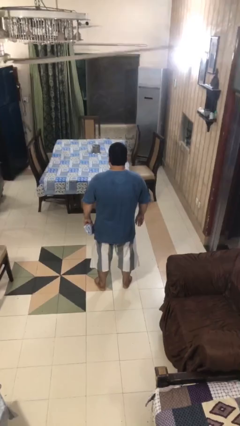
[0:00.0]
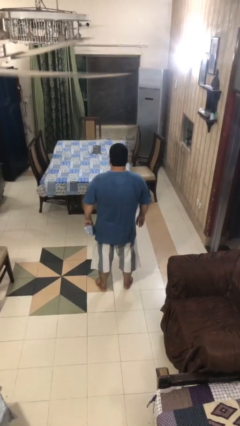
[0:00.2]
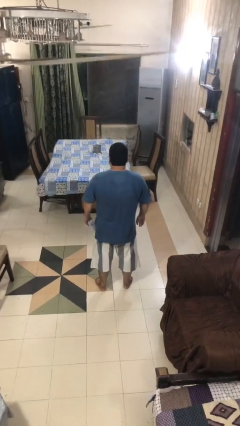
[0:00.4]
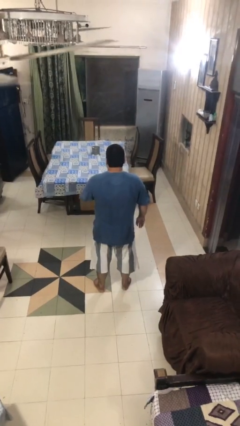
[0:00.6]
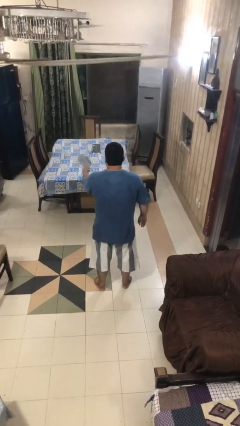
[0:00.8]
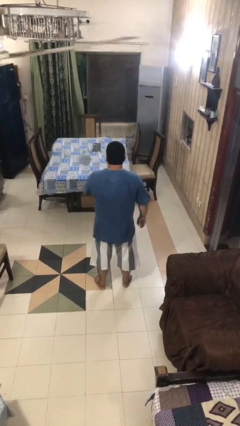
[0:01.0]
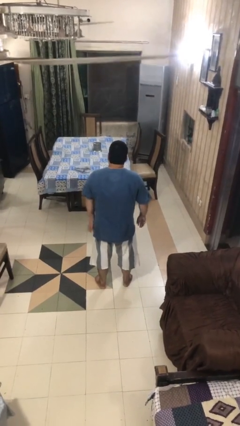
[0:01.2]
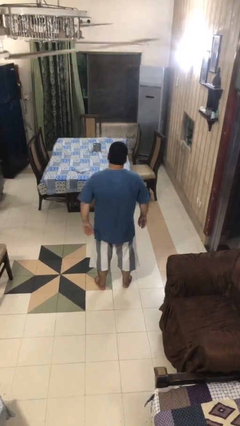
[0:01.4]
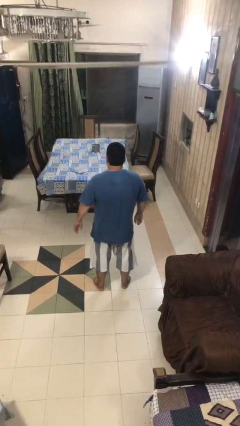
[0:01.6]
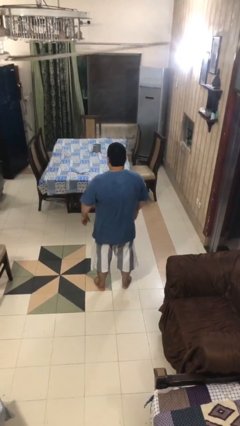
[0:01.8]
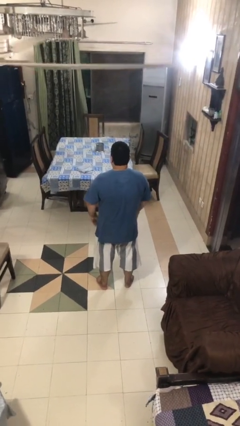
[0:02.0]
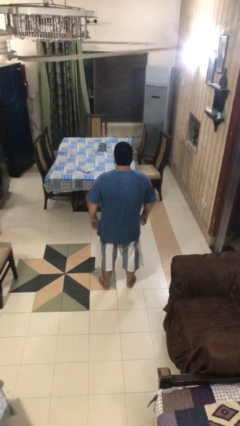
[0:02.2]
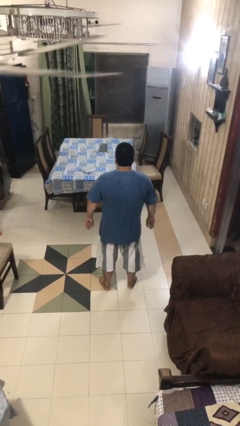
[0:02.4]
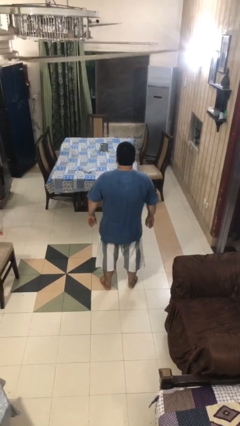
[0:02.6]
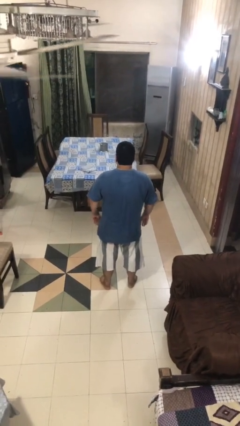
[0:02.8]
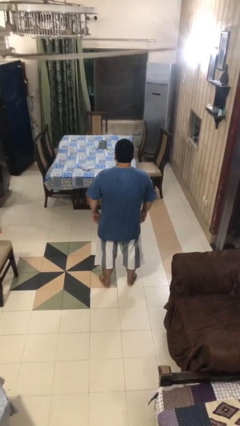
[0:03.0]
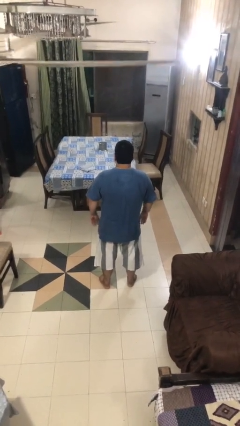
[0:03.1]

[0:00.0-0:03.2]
person throws object on table

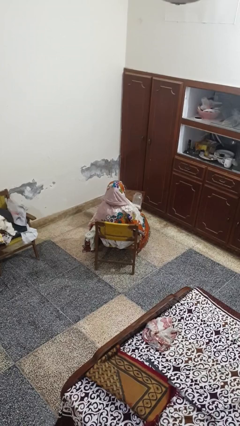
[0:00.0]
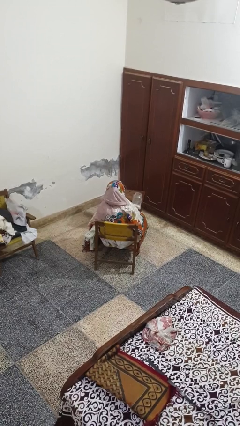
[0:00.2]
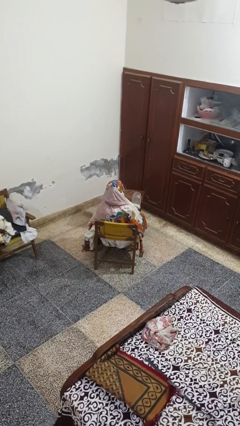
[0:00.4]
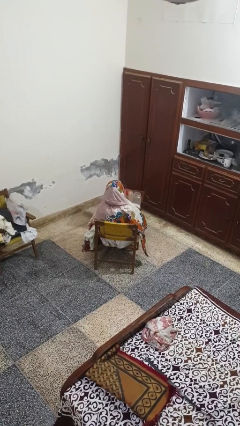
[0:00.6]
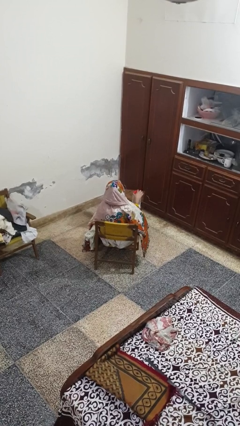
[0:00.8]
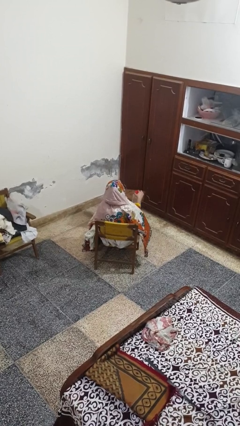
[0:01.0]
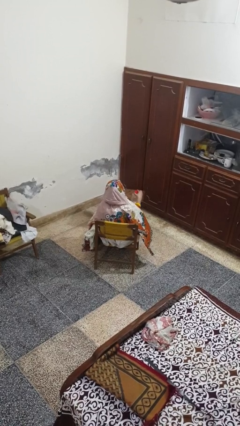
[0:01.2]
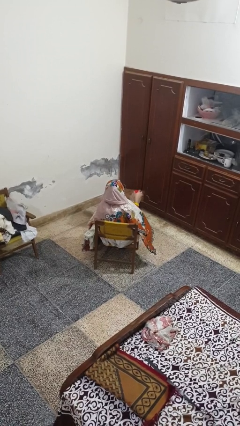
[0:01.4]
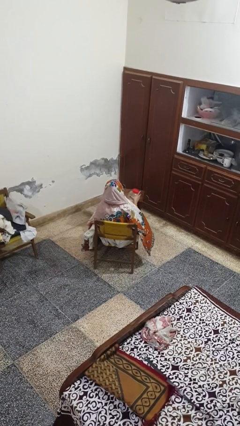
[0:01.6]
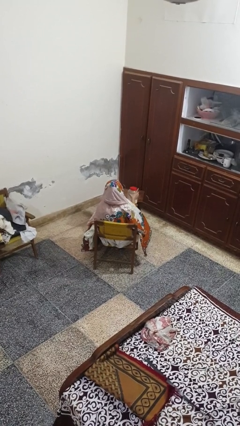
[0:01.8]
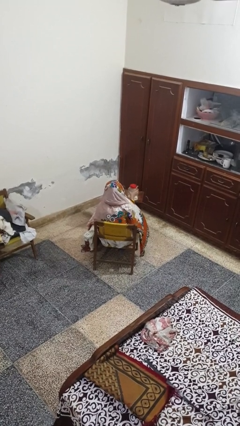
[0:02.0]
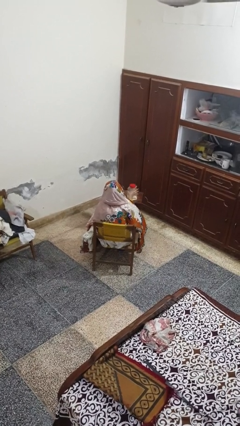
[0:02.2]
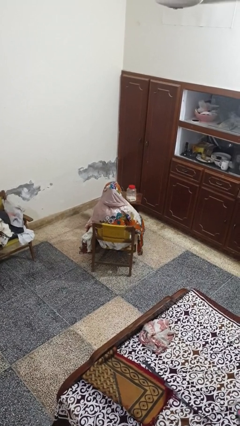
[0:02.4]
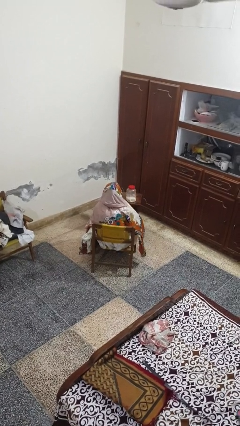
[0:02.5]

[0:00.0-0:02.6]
person closes jar

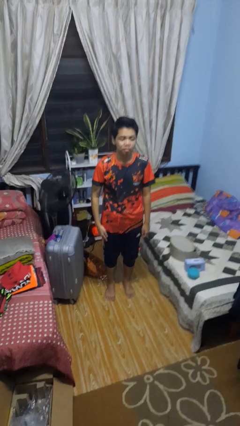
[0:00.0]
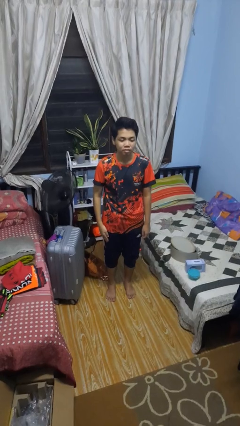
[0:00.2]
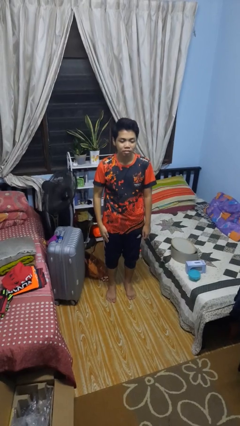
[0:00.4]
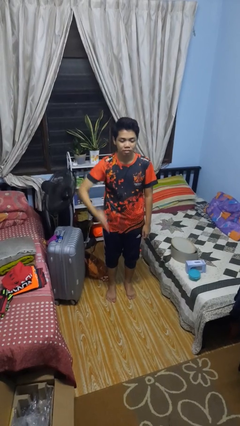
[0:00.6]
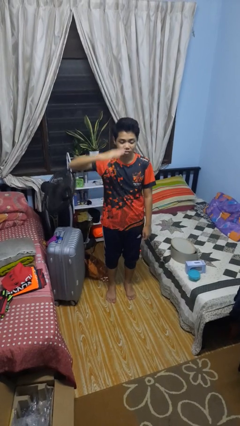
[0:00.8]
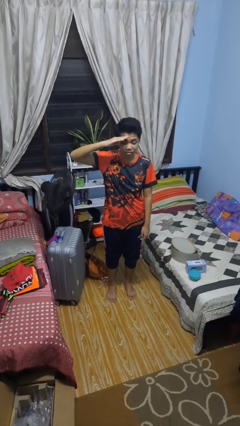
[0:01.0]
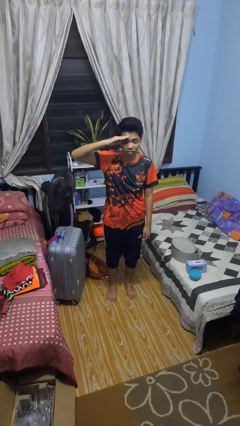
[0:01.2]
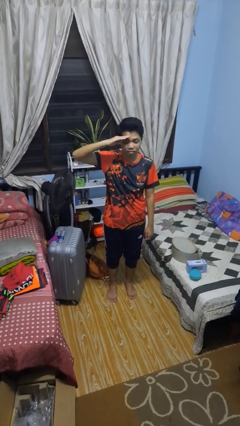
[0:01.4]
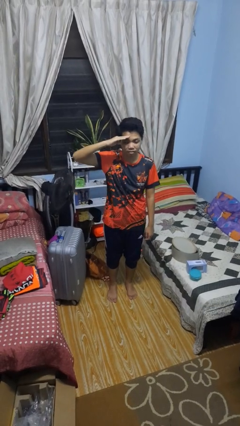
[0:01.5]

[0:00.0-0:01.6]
person salutes

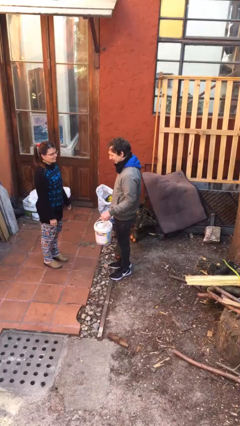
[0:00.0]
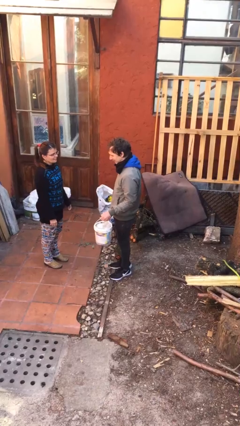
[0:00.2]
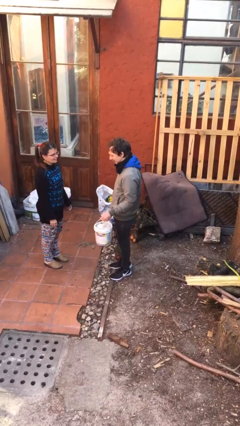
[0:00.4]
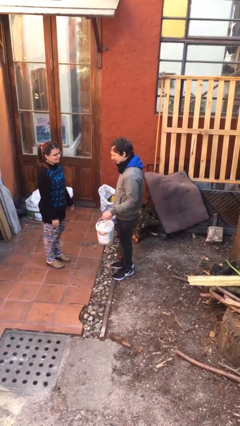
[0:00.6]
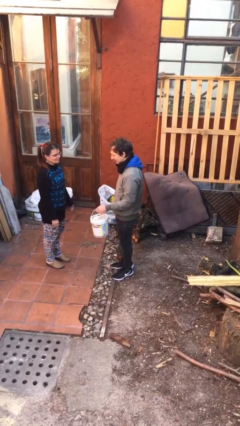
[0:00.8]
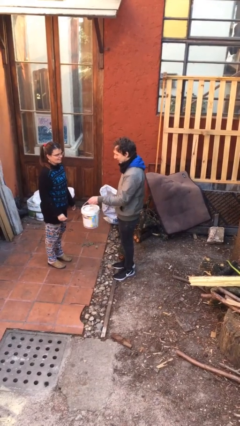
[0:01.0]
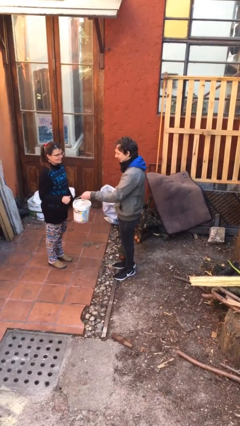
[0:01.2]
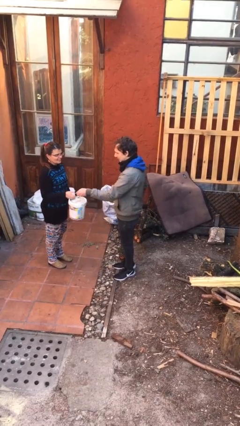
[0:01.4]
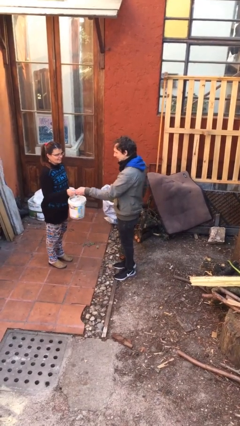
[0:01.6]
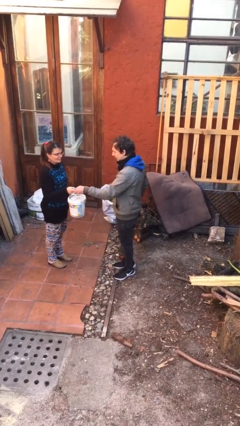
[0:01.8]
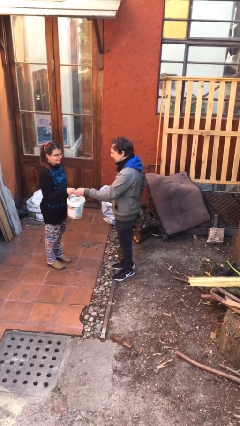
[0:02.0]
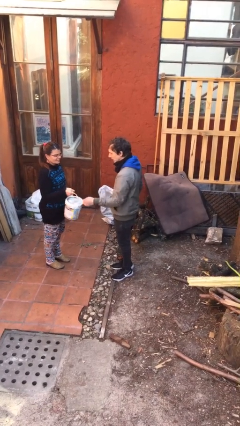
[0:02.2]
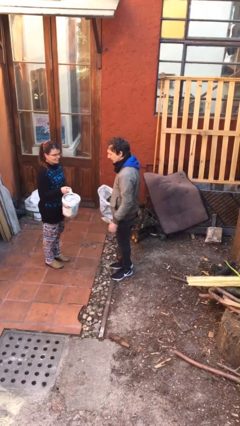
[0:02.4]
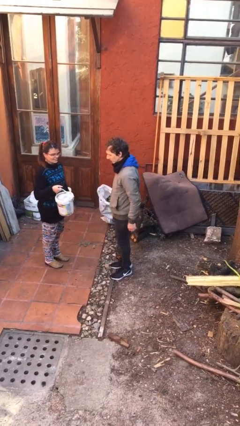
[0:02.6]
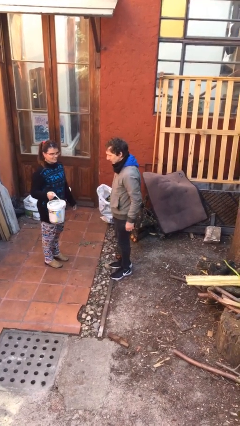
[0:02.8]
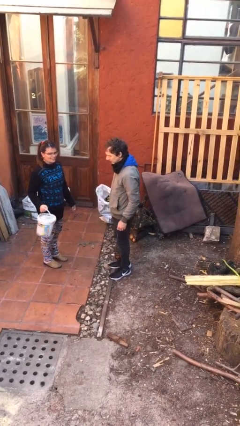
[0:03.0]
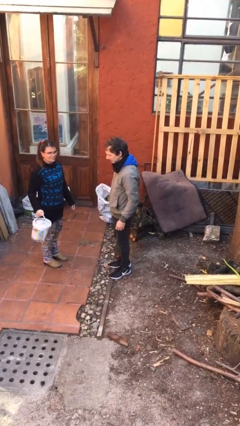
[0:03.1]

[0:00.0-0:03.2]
person transfers object to person

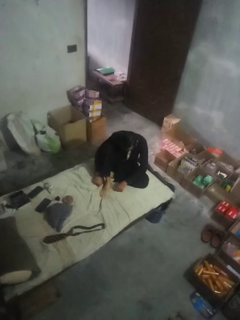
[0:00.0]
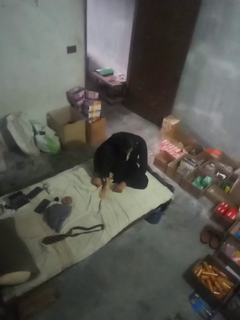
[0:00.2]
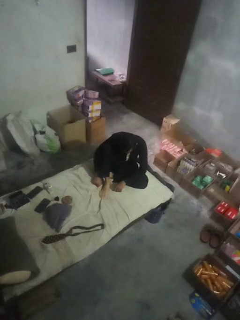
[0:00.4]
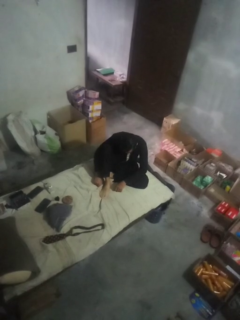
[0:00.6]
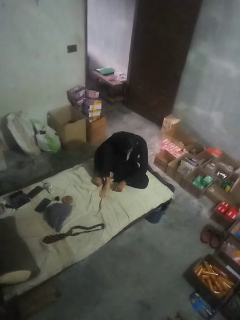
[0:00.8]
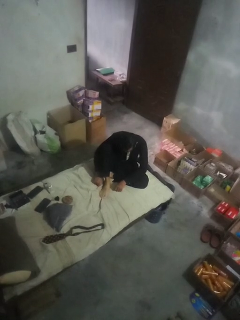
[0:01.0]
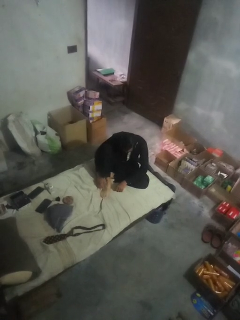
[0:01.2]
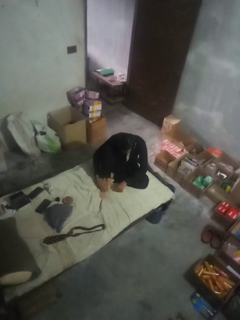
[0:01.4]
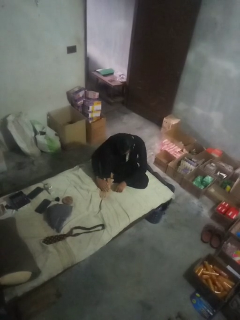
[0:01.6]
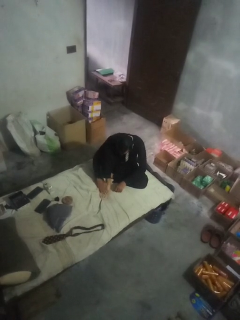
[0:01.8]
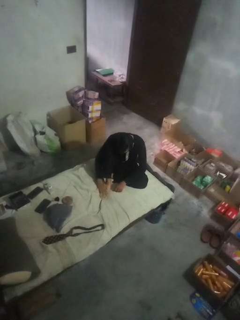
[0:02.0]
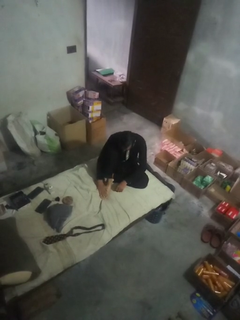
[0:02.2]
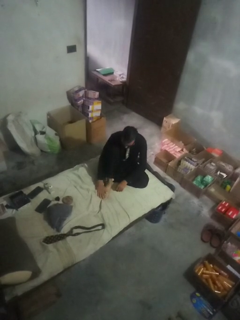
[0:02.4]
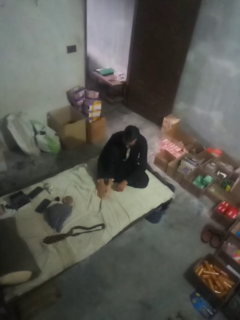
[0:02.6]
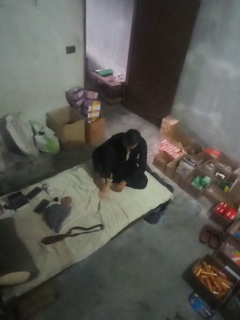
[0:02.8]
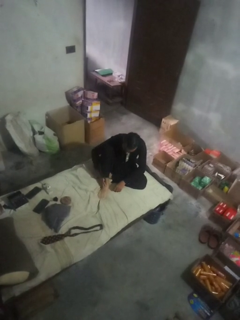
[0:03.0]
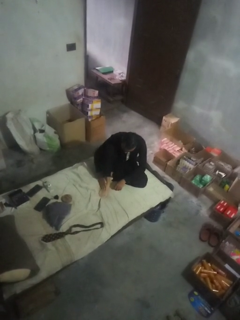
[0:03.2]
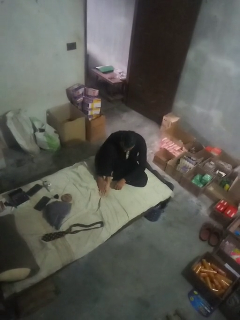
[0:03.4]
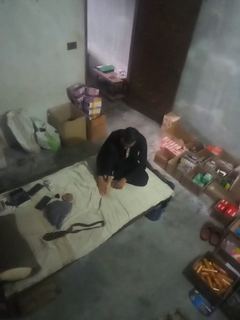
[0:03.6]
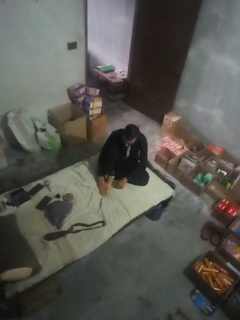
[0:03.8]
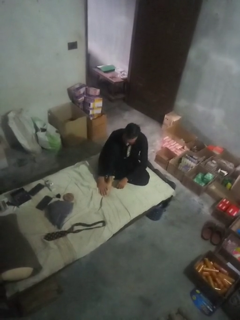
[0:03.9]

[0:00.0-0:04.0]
person rubs foot

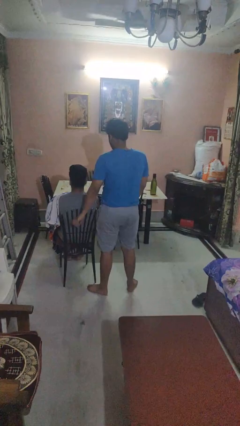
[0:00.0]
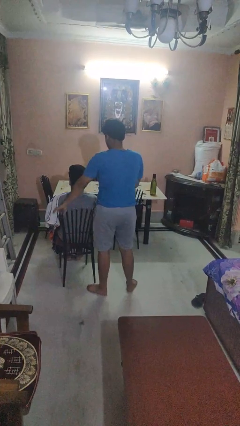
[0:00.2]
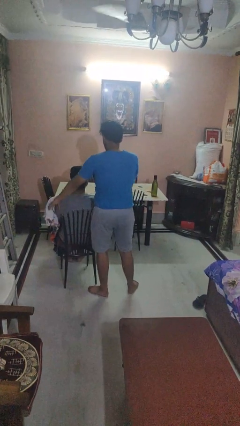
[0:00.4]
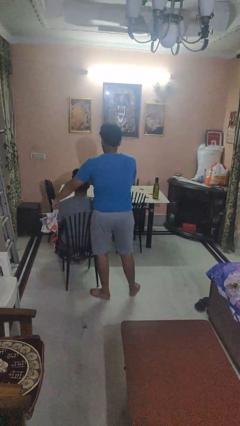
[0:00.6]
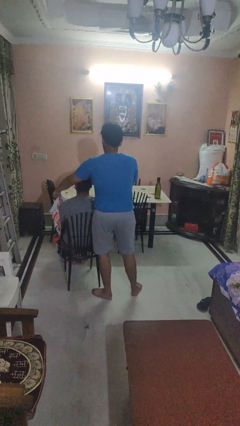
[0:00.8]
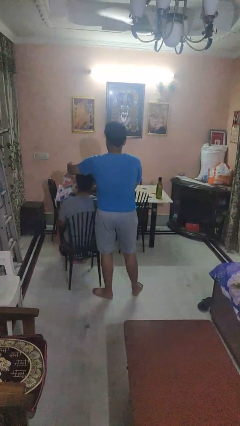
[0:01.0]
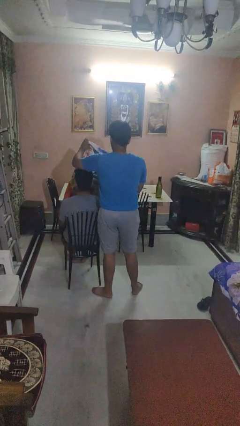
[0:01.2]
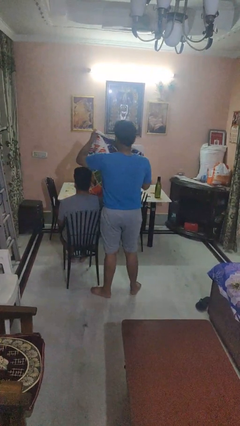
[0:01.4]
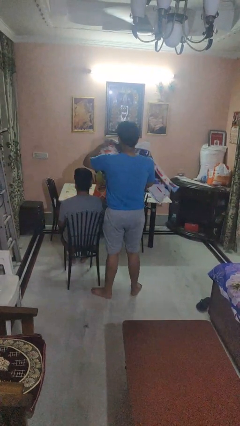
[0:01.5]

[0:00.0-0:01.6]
person uncovers friend with blanket

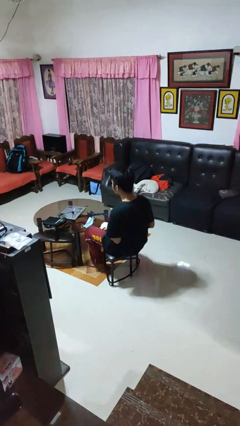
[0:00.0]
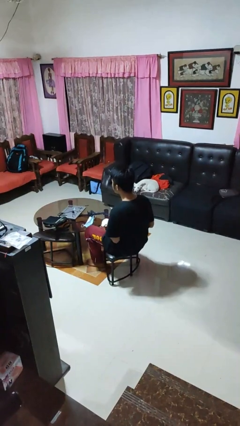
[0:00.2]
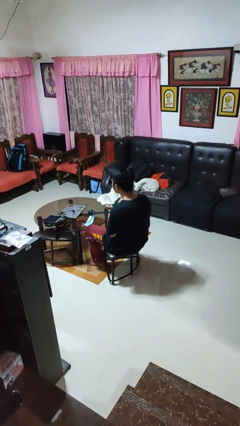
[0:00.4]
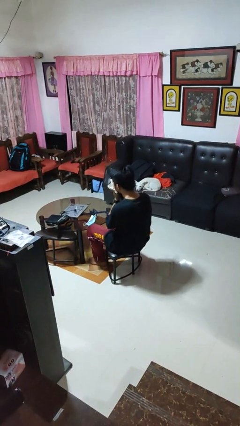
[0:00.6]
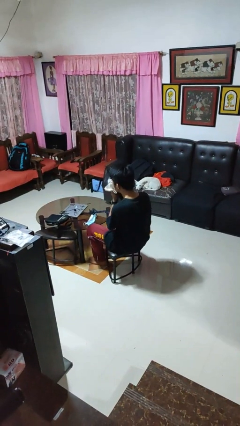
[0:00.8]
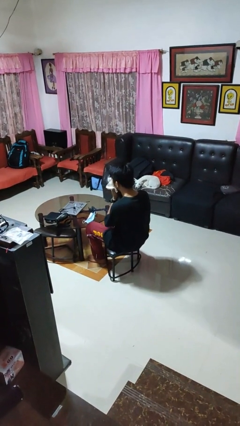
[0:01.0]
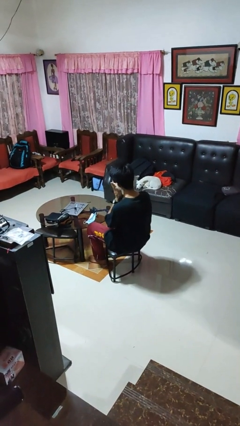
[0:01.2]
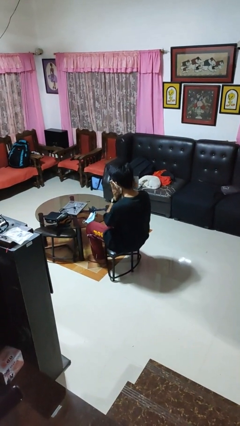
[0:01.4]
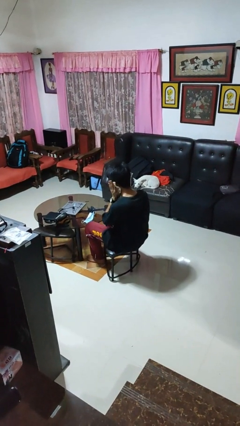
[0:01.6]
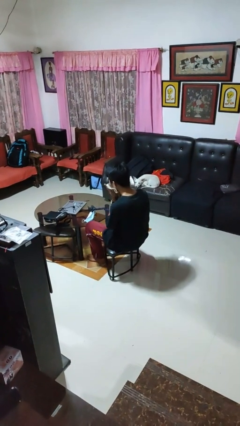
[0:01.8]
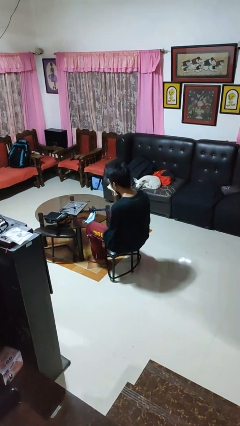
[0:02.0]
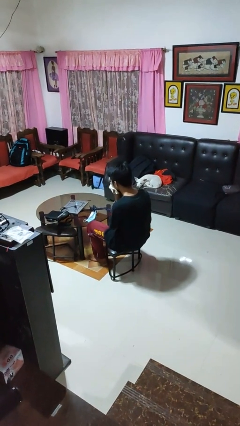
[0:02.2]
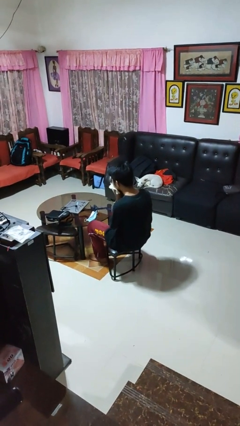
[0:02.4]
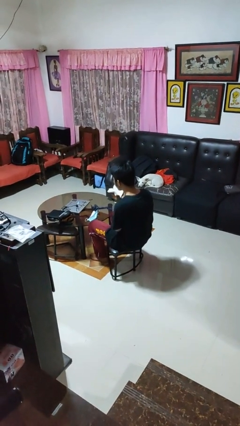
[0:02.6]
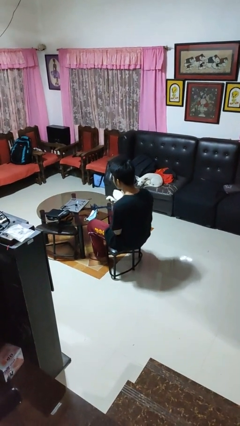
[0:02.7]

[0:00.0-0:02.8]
person wipes mouth with napkin
